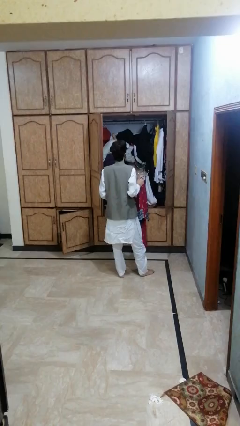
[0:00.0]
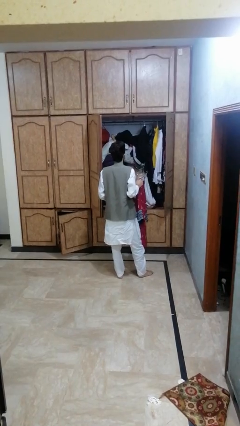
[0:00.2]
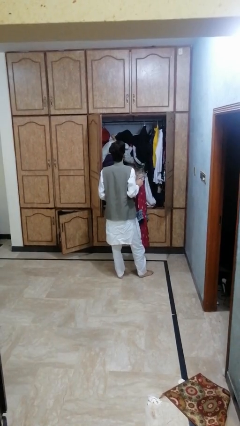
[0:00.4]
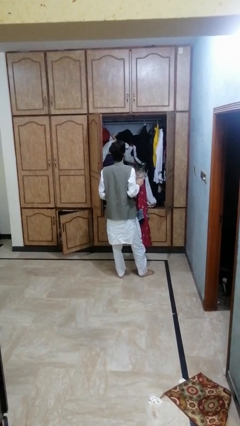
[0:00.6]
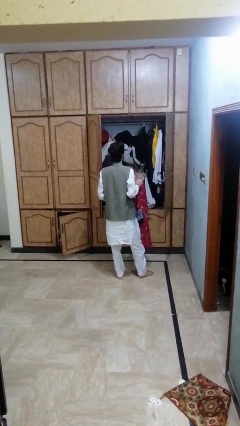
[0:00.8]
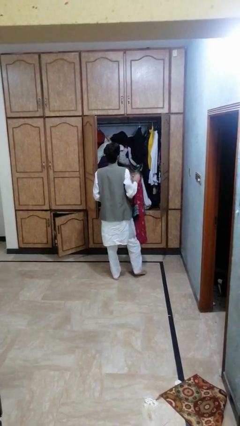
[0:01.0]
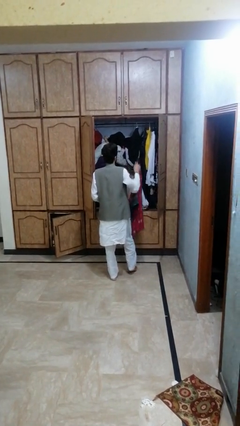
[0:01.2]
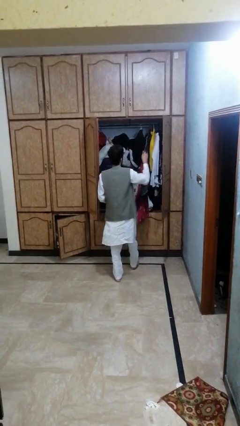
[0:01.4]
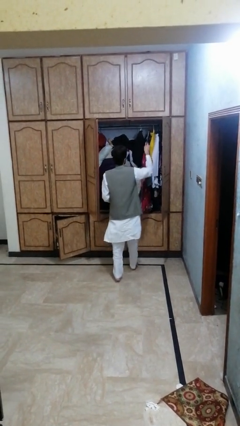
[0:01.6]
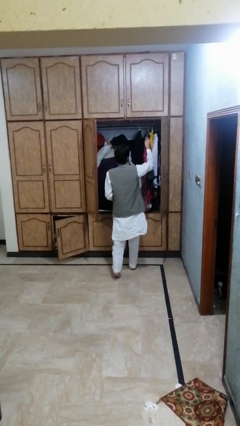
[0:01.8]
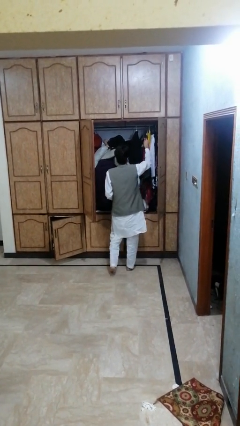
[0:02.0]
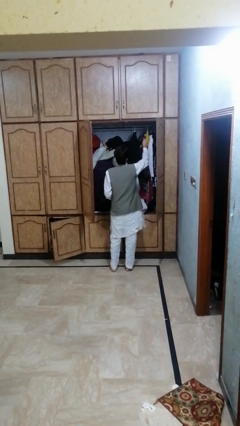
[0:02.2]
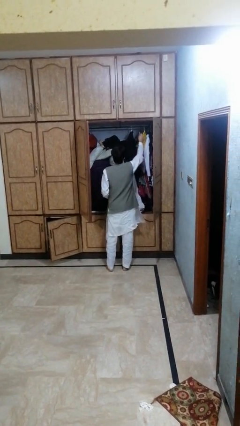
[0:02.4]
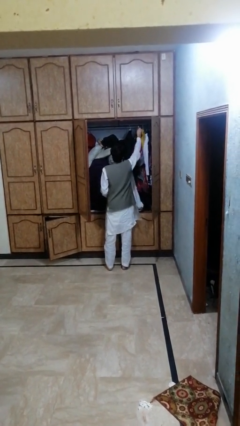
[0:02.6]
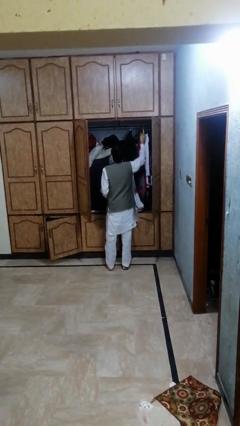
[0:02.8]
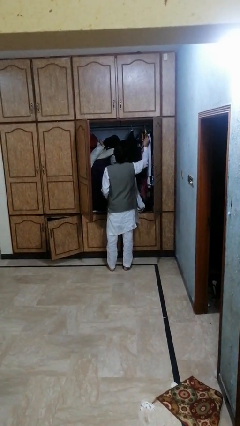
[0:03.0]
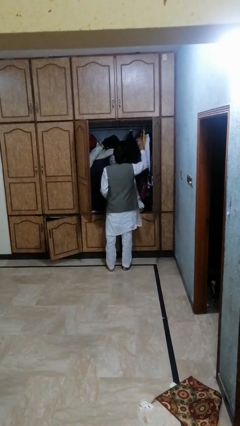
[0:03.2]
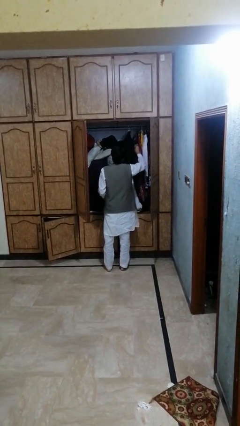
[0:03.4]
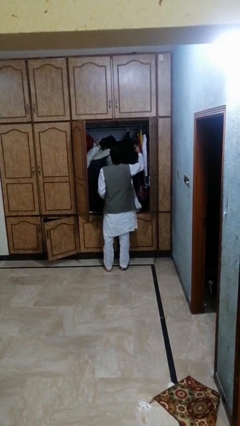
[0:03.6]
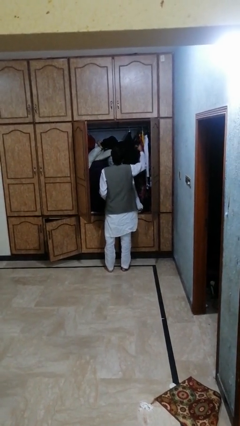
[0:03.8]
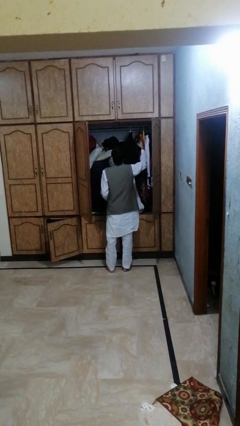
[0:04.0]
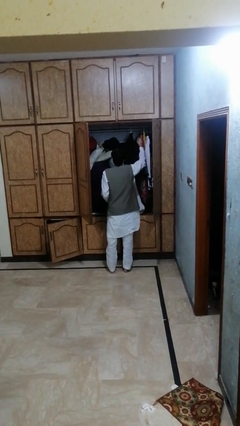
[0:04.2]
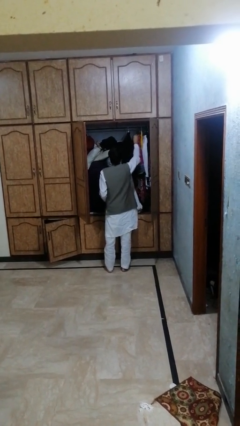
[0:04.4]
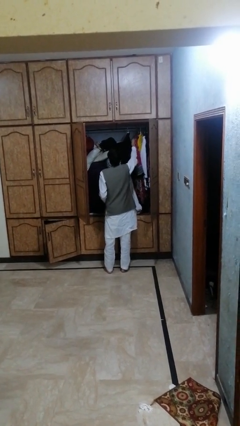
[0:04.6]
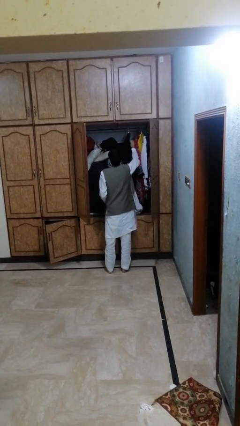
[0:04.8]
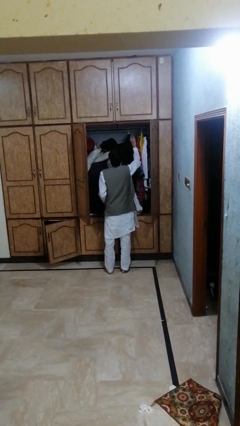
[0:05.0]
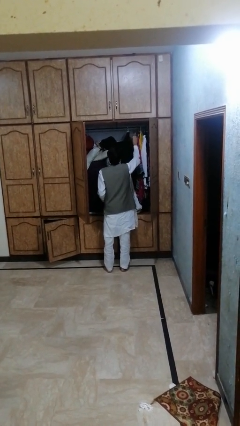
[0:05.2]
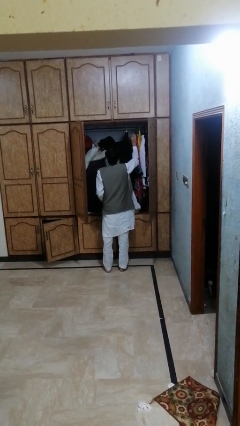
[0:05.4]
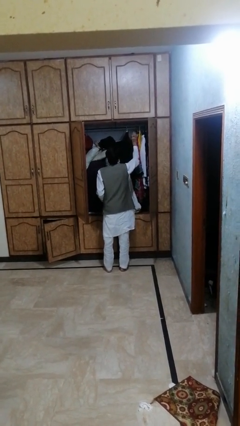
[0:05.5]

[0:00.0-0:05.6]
person puts clothes into dresser

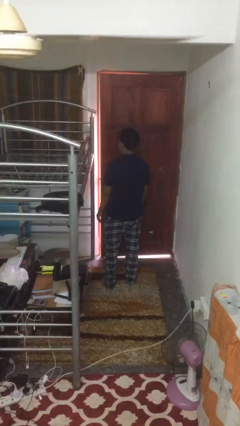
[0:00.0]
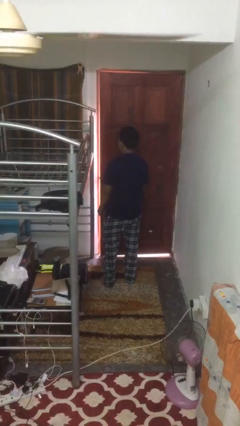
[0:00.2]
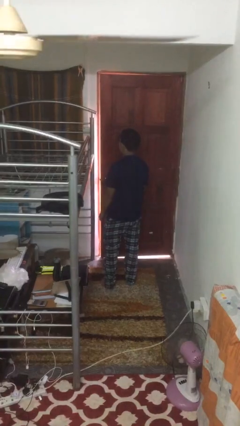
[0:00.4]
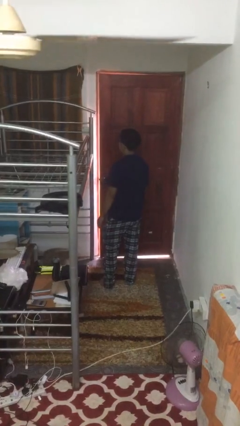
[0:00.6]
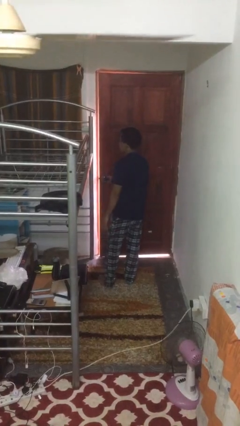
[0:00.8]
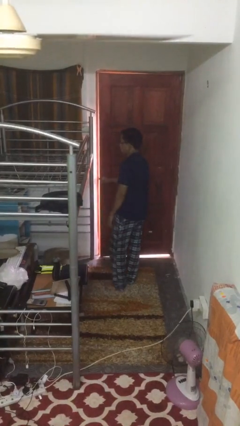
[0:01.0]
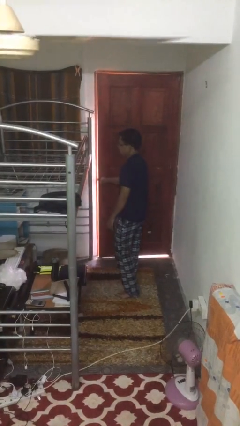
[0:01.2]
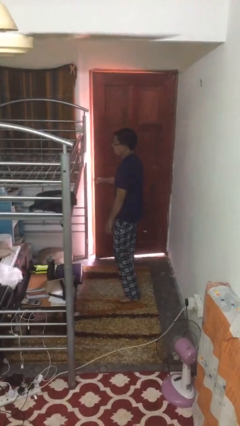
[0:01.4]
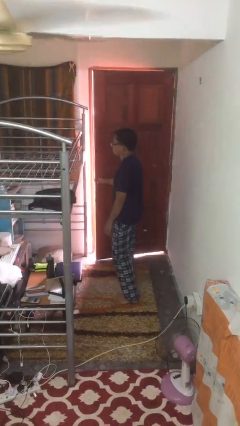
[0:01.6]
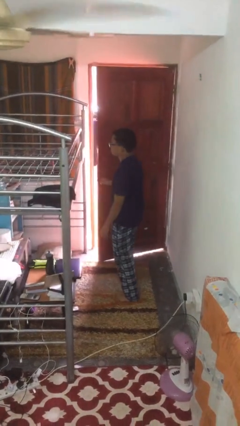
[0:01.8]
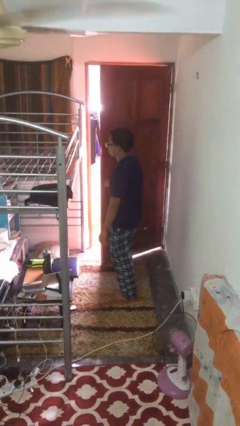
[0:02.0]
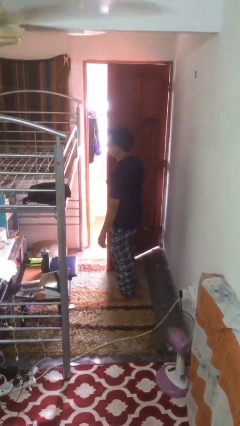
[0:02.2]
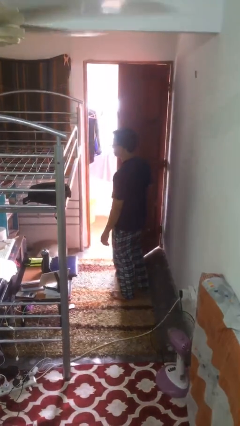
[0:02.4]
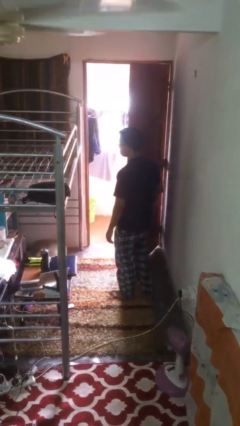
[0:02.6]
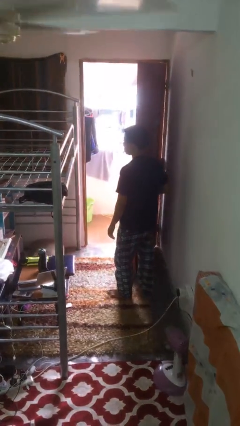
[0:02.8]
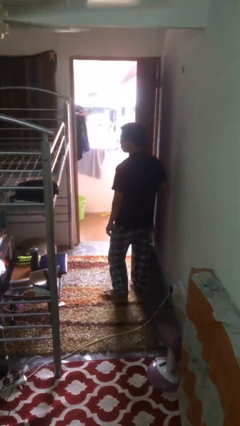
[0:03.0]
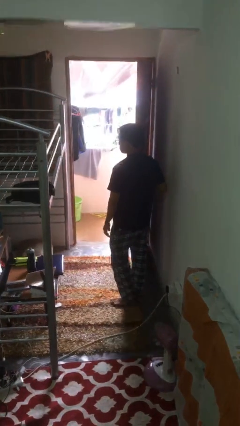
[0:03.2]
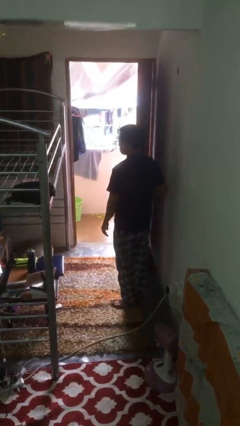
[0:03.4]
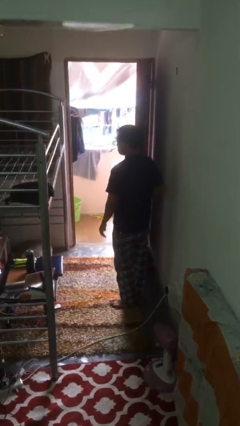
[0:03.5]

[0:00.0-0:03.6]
person opens facility door

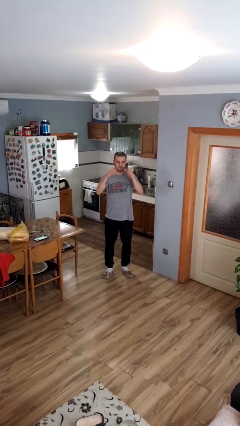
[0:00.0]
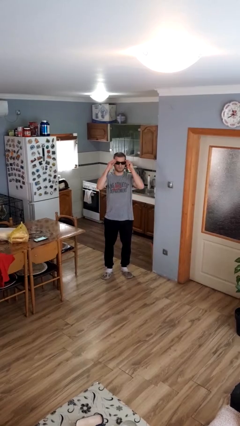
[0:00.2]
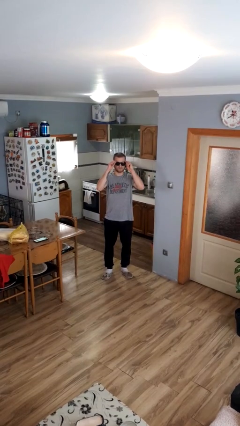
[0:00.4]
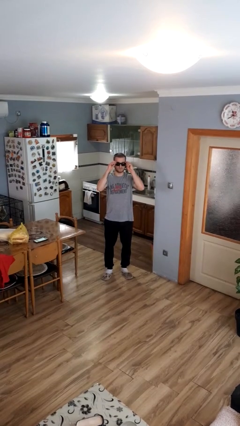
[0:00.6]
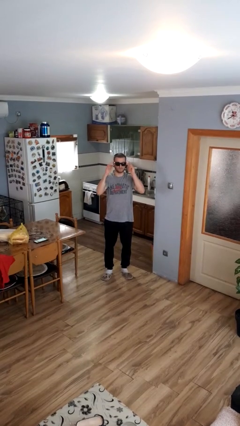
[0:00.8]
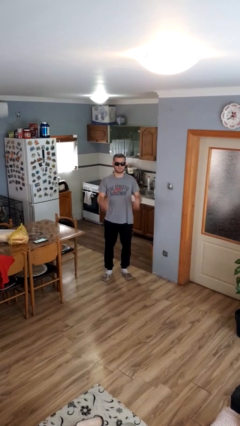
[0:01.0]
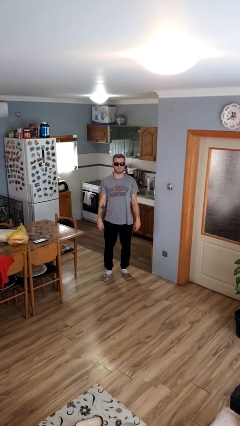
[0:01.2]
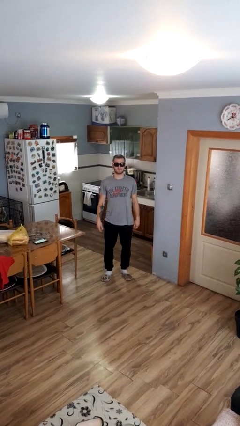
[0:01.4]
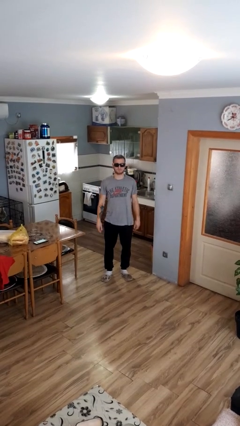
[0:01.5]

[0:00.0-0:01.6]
person puts on sunglasses

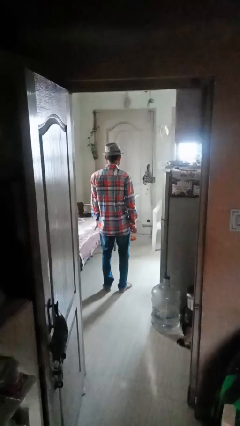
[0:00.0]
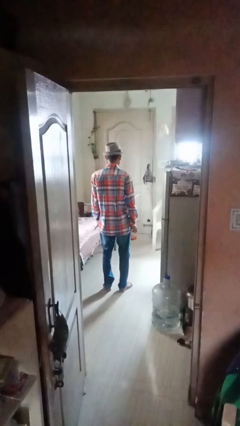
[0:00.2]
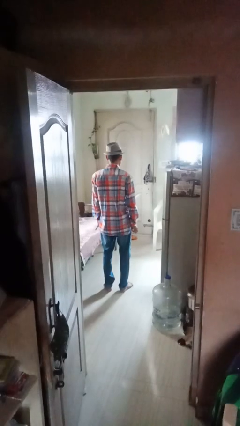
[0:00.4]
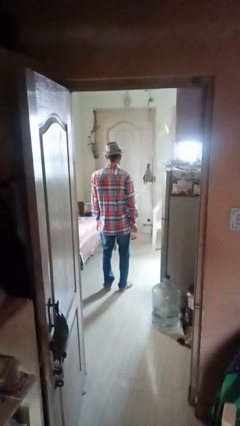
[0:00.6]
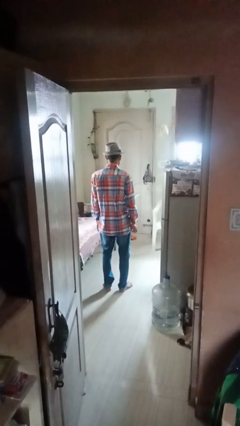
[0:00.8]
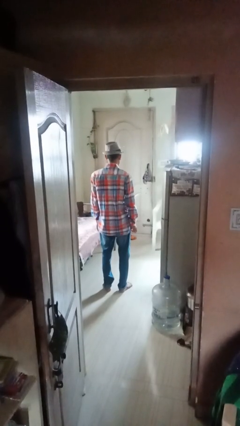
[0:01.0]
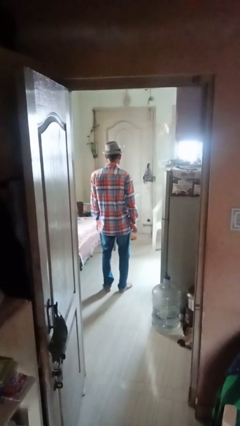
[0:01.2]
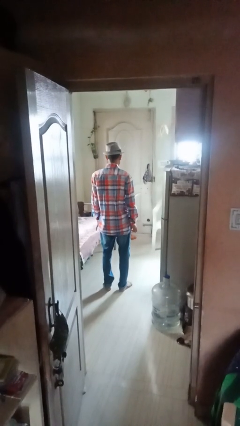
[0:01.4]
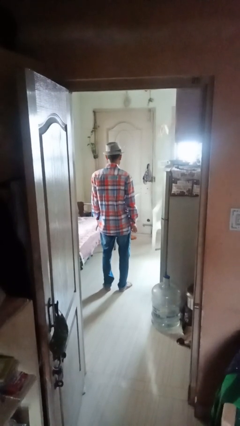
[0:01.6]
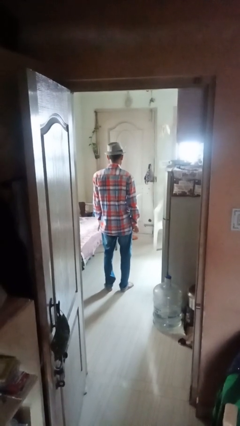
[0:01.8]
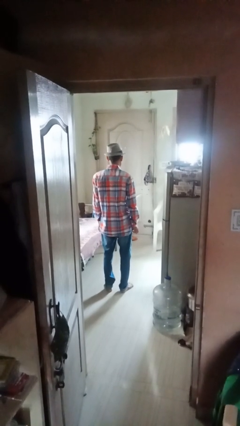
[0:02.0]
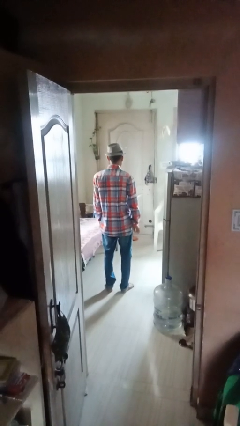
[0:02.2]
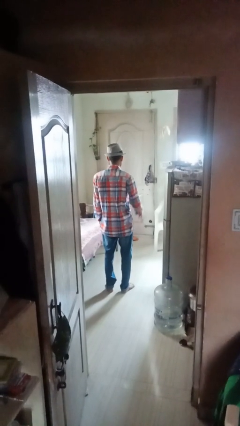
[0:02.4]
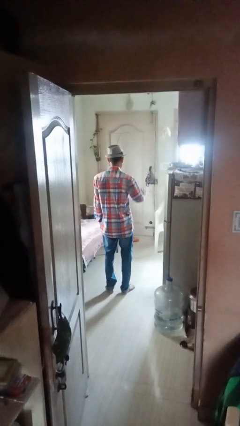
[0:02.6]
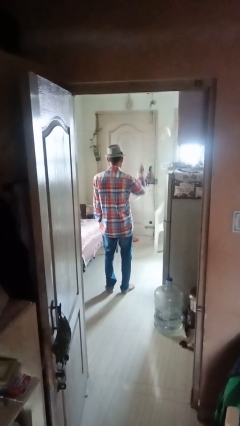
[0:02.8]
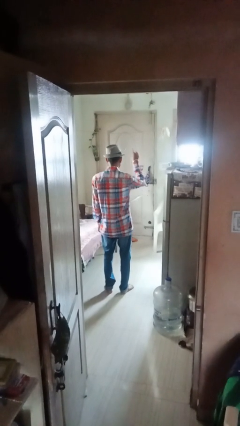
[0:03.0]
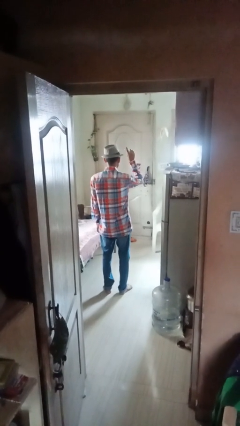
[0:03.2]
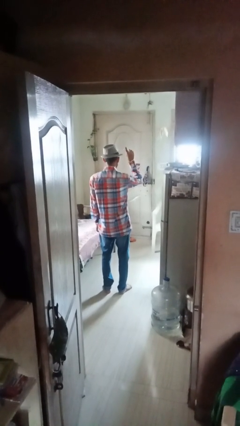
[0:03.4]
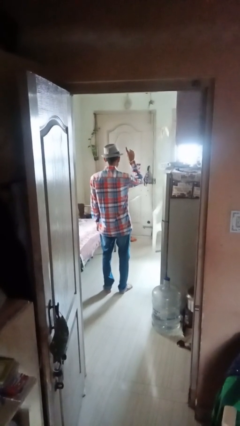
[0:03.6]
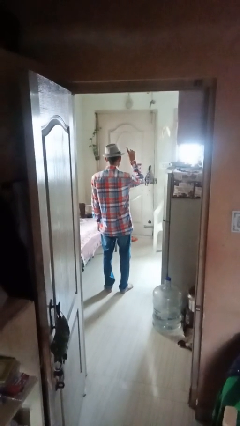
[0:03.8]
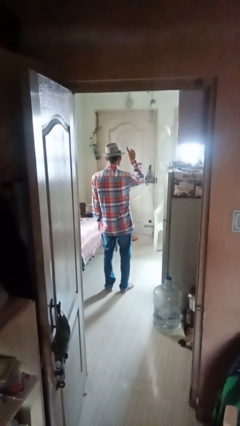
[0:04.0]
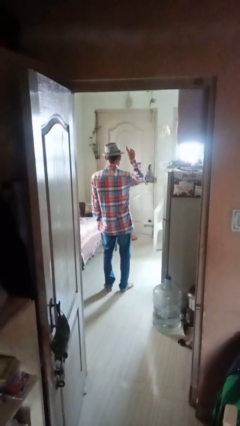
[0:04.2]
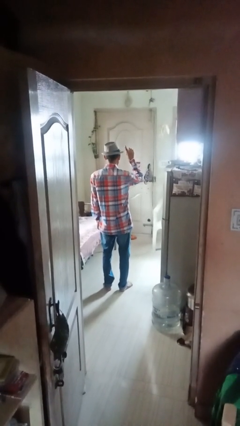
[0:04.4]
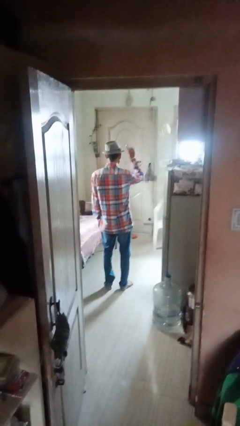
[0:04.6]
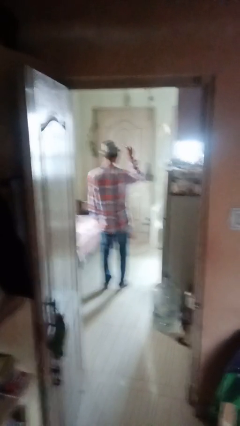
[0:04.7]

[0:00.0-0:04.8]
person gestures number one

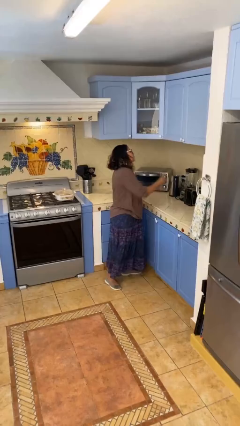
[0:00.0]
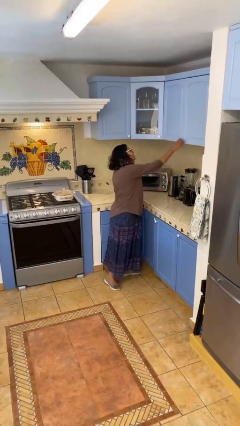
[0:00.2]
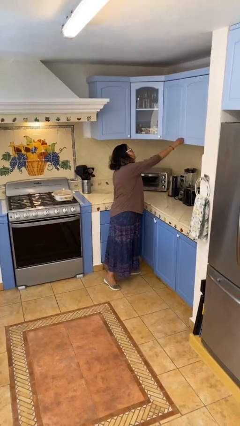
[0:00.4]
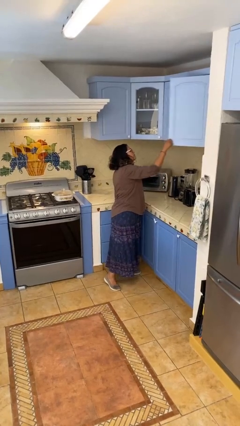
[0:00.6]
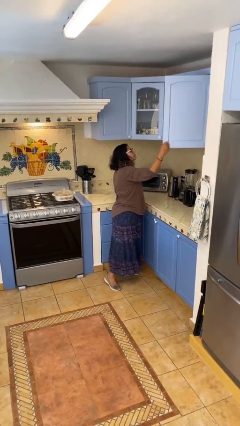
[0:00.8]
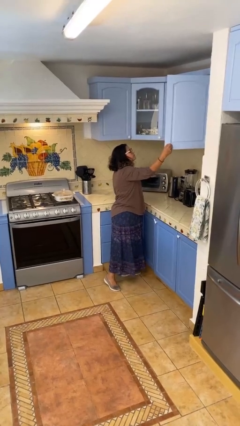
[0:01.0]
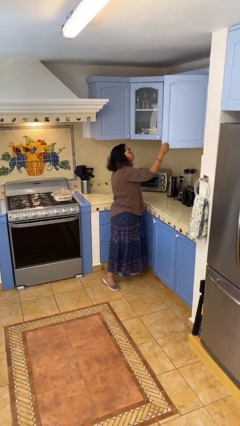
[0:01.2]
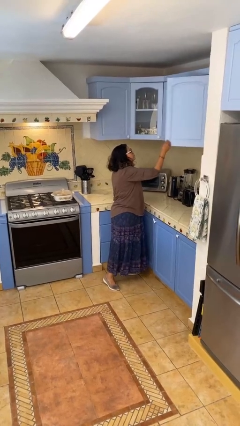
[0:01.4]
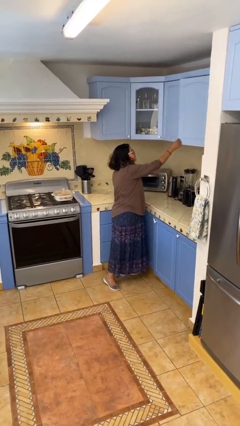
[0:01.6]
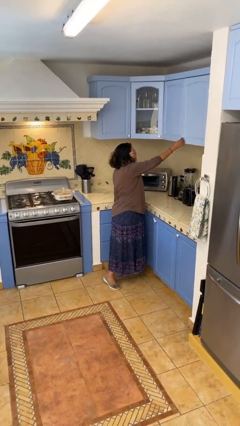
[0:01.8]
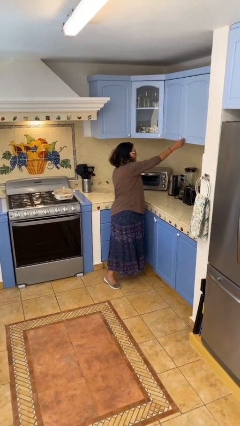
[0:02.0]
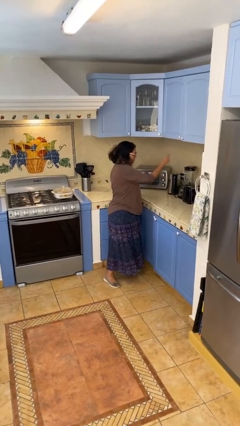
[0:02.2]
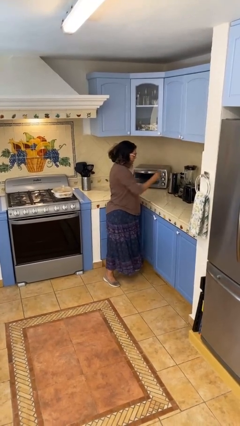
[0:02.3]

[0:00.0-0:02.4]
person closes cabinet
